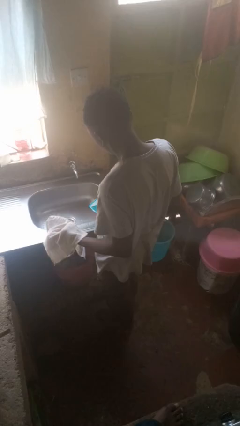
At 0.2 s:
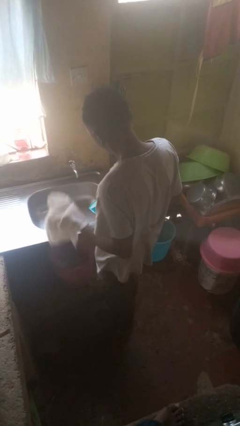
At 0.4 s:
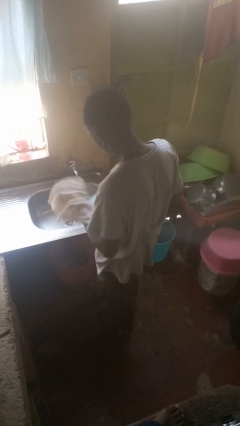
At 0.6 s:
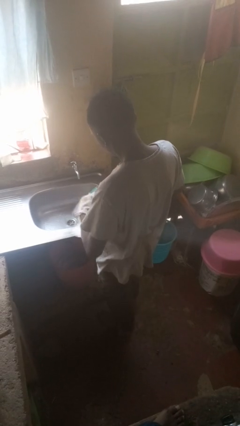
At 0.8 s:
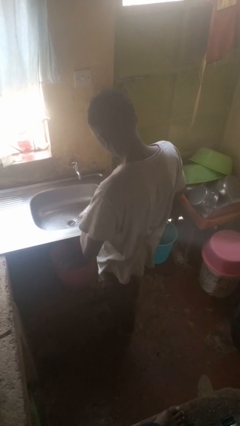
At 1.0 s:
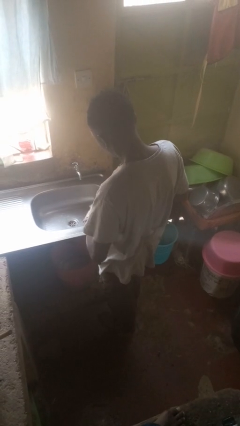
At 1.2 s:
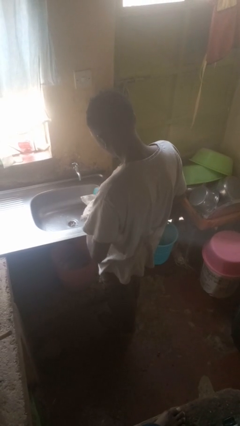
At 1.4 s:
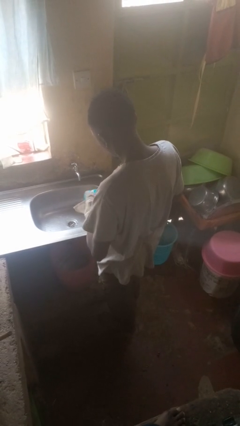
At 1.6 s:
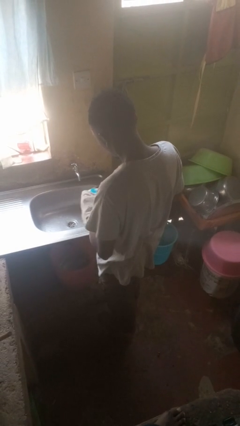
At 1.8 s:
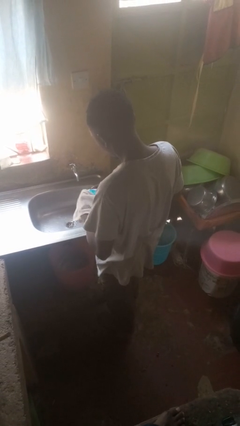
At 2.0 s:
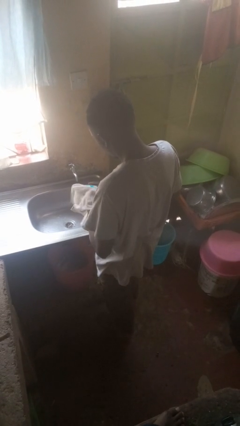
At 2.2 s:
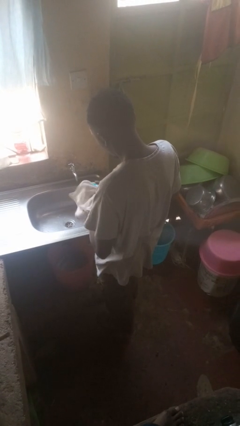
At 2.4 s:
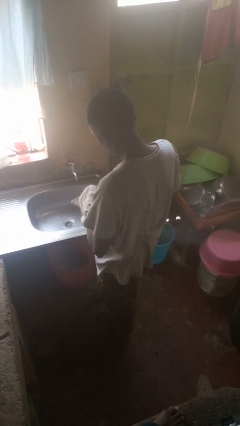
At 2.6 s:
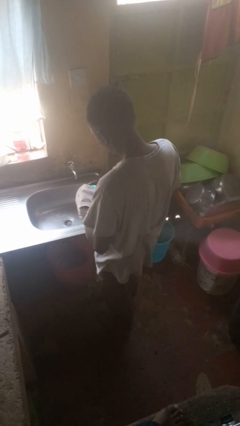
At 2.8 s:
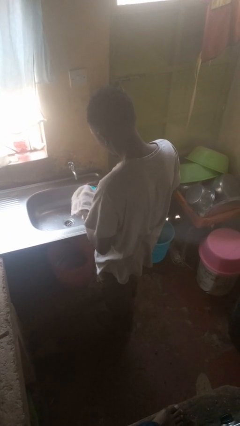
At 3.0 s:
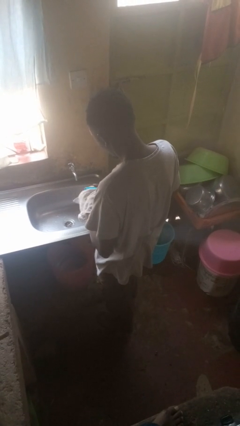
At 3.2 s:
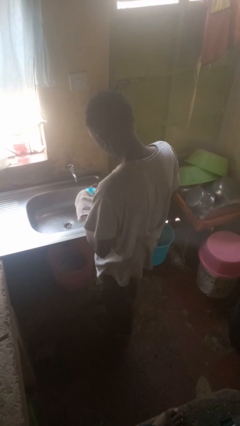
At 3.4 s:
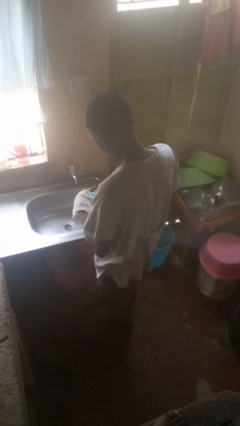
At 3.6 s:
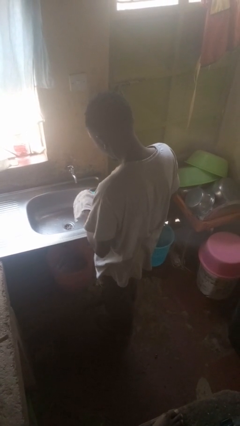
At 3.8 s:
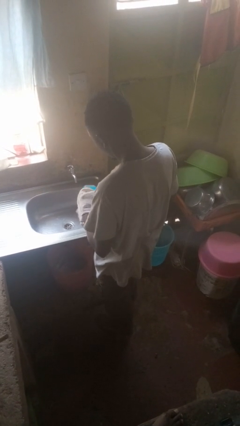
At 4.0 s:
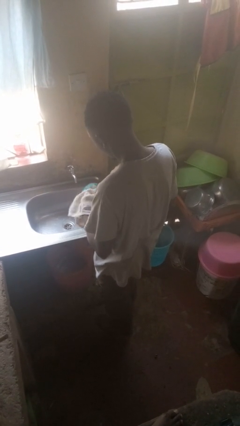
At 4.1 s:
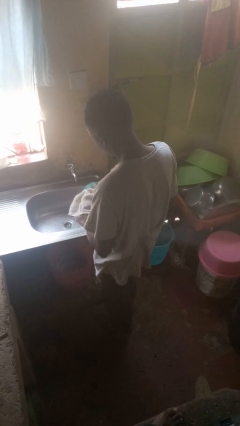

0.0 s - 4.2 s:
person dries dish

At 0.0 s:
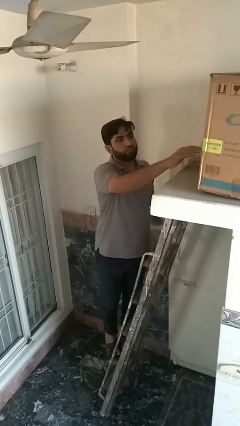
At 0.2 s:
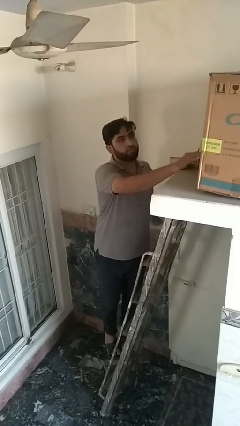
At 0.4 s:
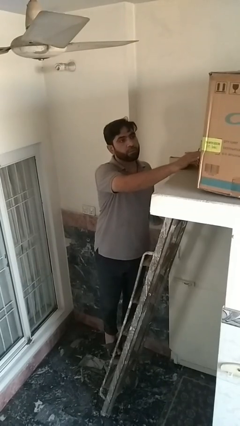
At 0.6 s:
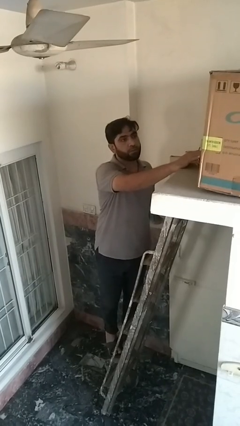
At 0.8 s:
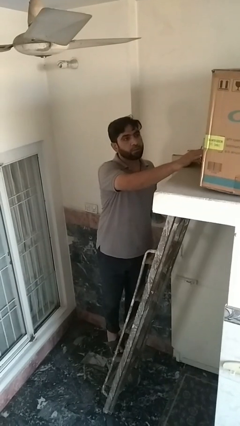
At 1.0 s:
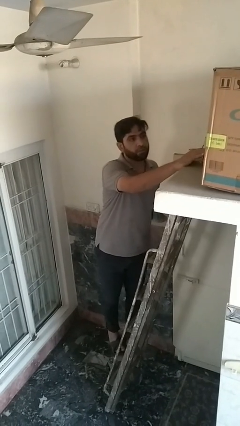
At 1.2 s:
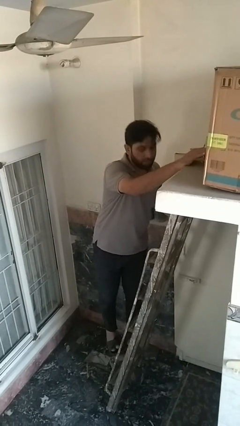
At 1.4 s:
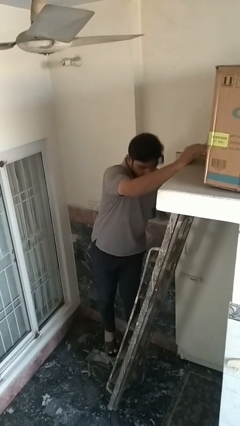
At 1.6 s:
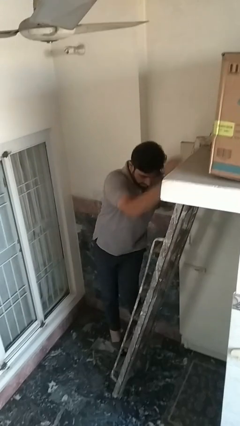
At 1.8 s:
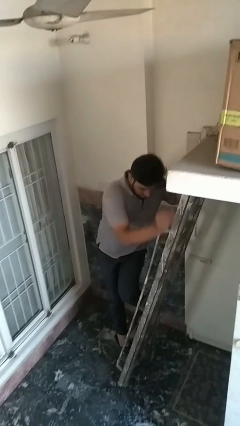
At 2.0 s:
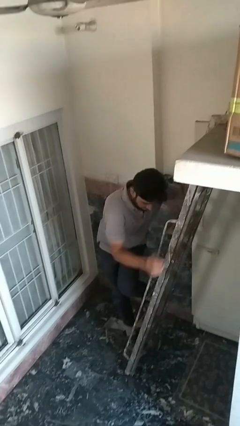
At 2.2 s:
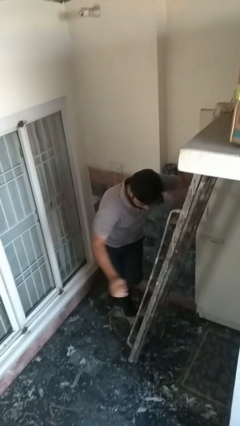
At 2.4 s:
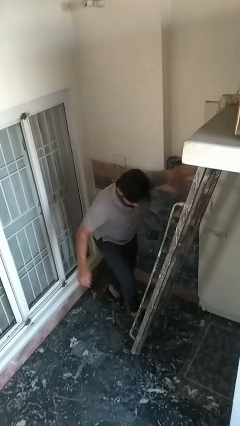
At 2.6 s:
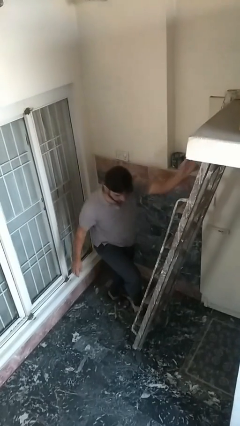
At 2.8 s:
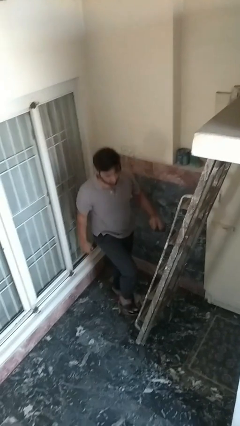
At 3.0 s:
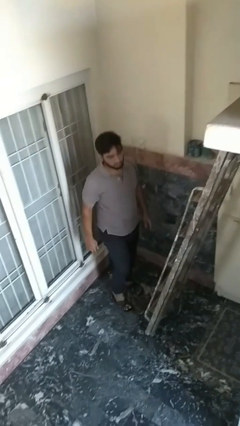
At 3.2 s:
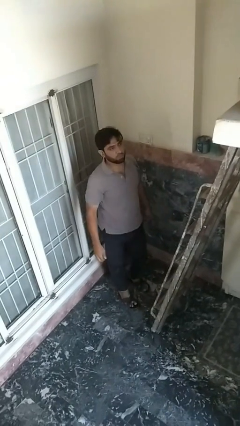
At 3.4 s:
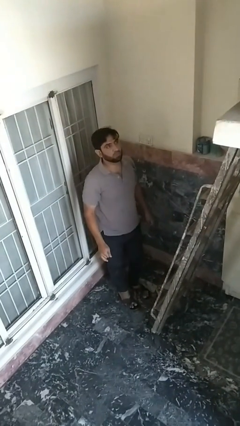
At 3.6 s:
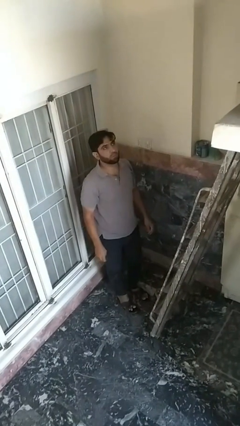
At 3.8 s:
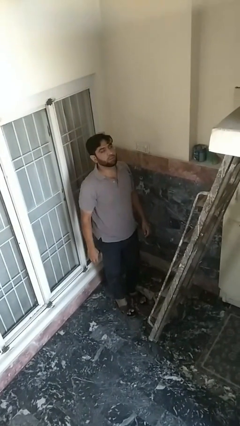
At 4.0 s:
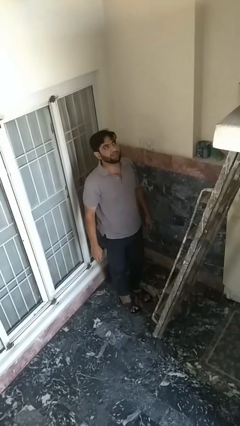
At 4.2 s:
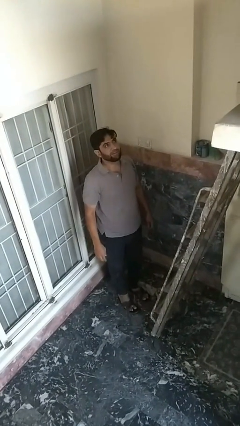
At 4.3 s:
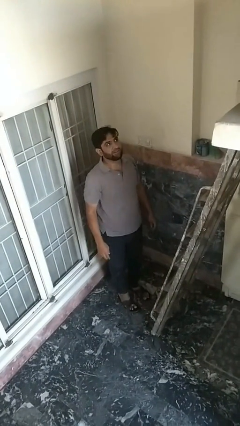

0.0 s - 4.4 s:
person climbs down ladder

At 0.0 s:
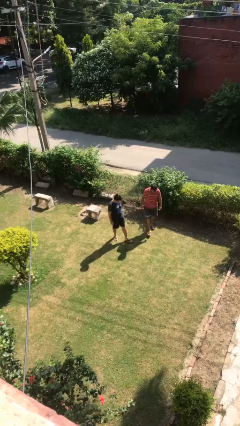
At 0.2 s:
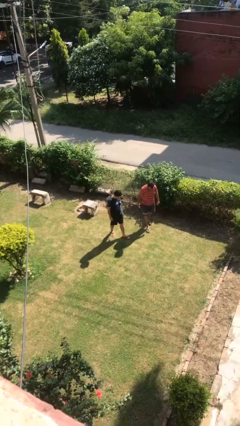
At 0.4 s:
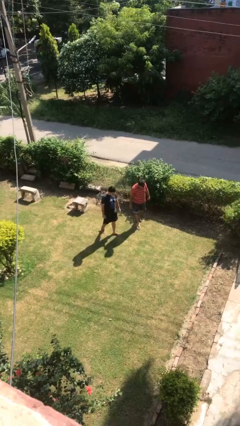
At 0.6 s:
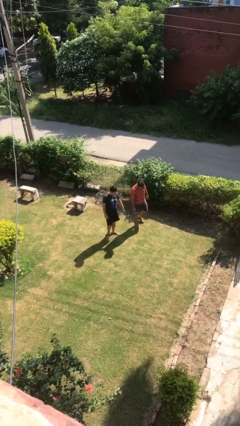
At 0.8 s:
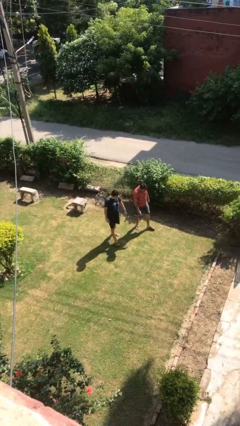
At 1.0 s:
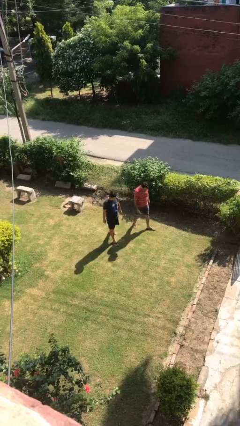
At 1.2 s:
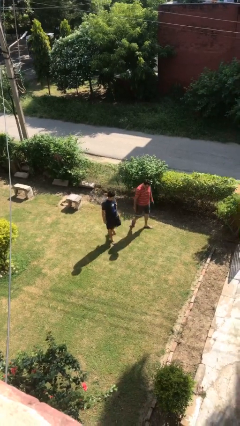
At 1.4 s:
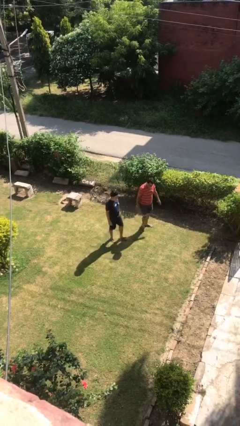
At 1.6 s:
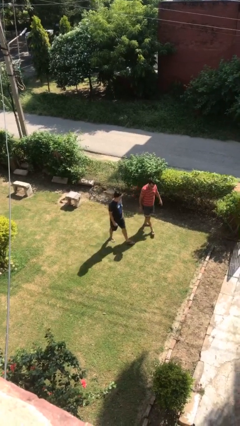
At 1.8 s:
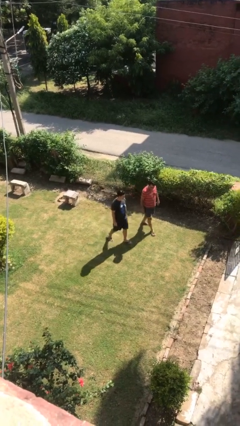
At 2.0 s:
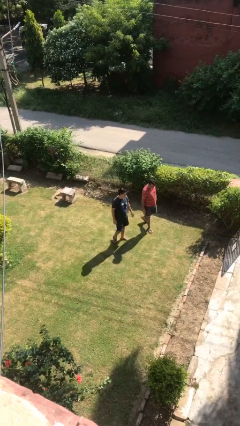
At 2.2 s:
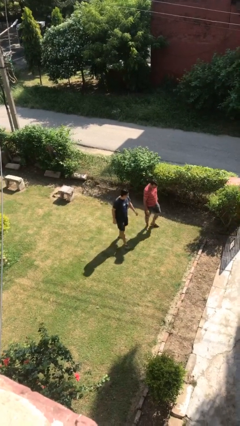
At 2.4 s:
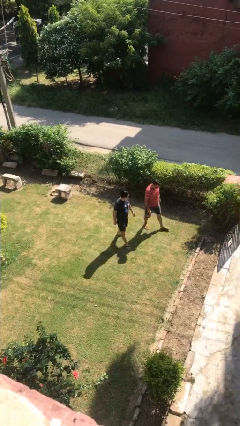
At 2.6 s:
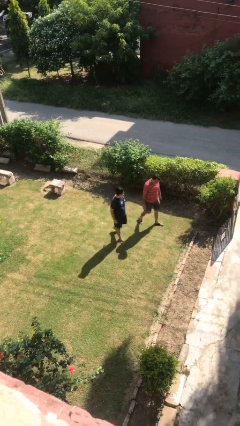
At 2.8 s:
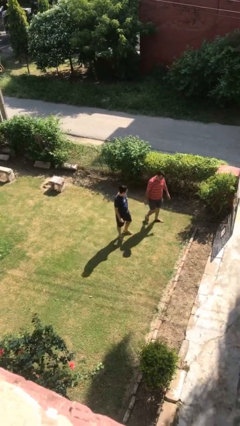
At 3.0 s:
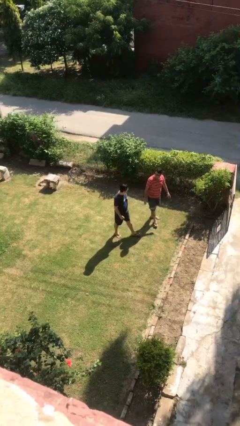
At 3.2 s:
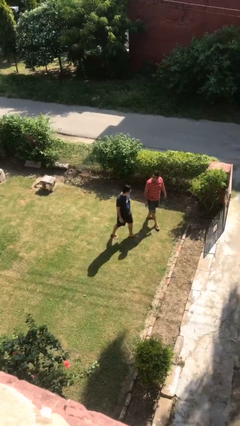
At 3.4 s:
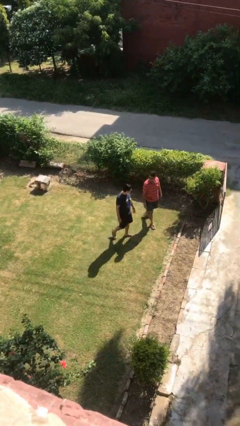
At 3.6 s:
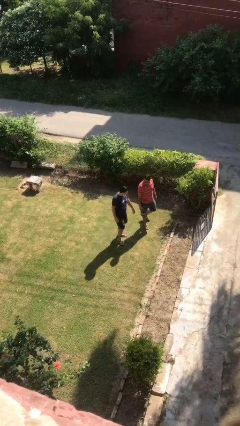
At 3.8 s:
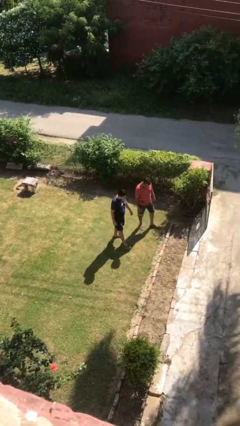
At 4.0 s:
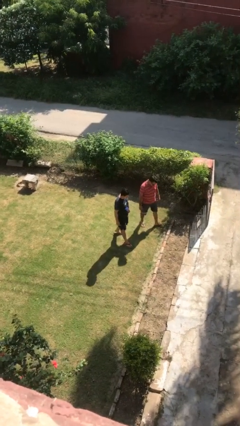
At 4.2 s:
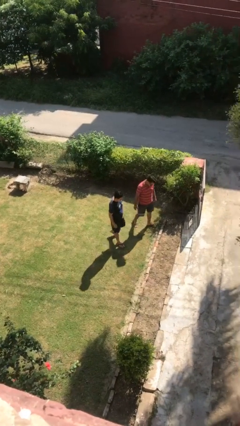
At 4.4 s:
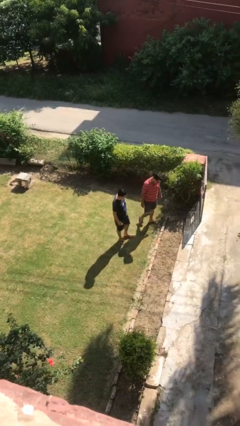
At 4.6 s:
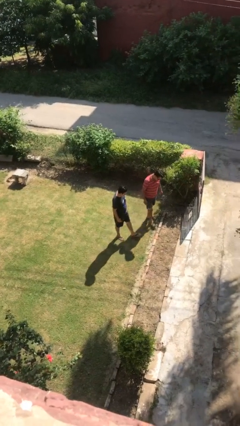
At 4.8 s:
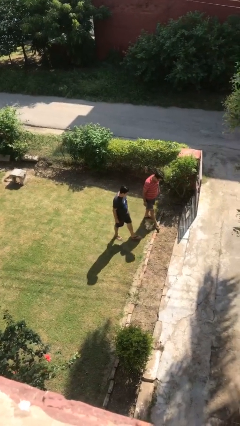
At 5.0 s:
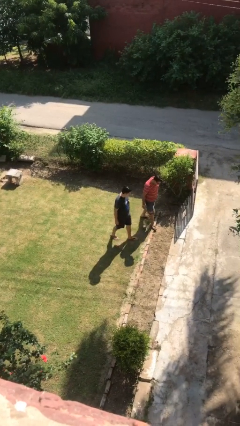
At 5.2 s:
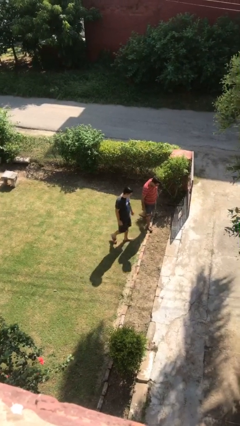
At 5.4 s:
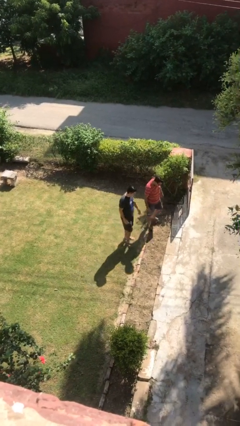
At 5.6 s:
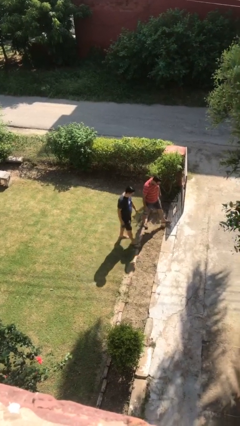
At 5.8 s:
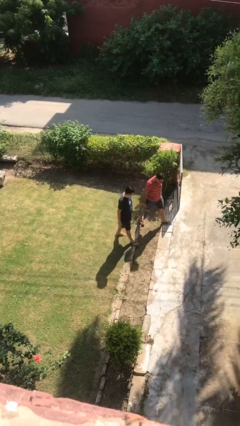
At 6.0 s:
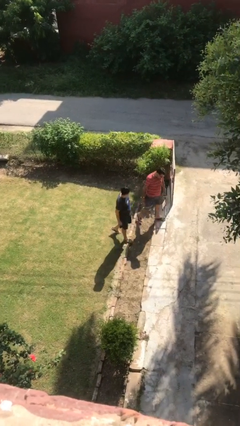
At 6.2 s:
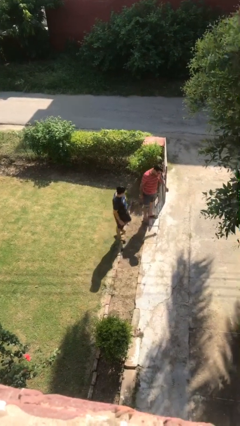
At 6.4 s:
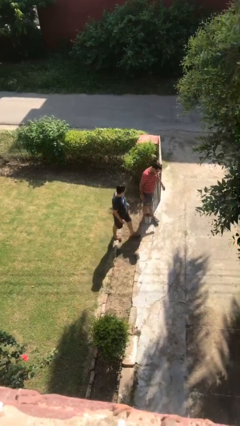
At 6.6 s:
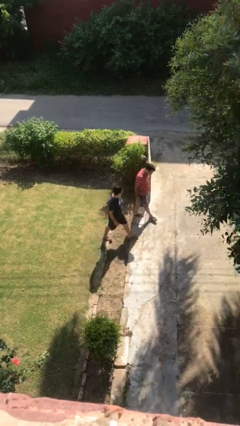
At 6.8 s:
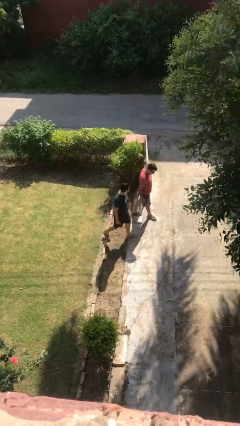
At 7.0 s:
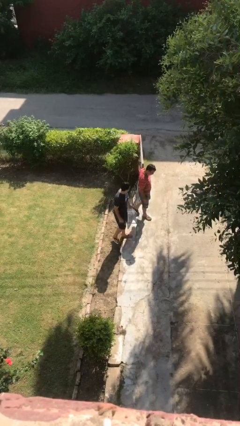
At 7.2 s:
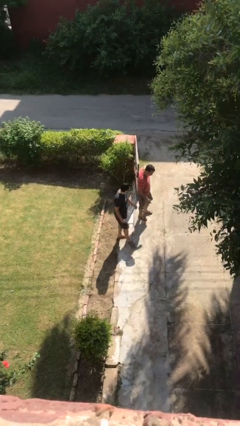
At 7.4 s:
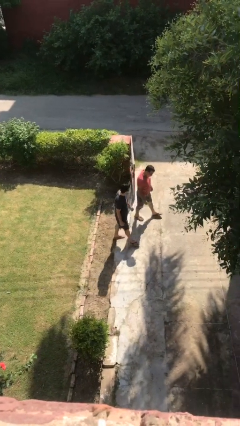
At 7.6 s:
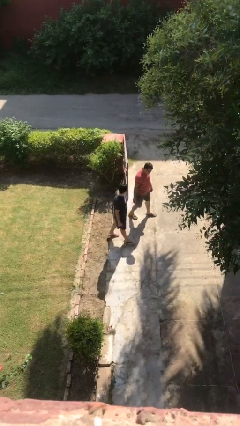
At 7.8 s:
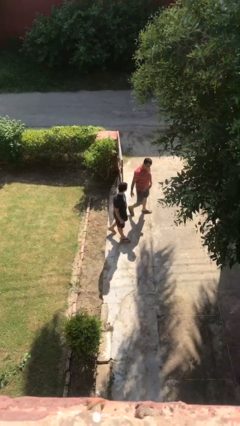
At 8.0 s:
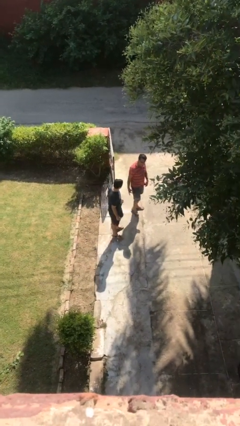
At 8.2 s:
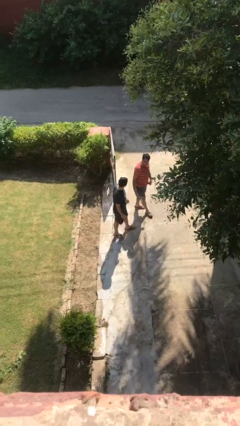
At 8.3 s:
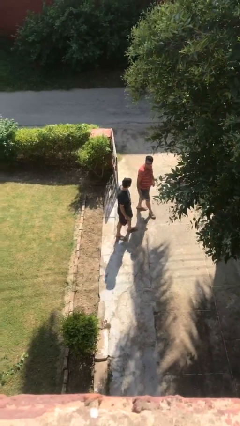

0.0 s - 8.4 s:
person talks to person

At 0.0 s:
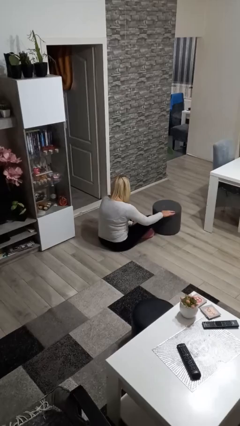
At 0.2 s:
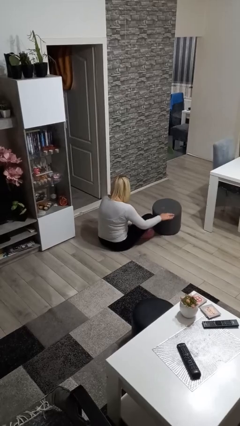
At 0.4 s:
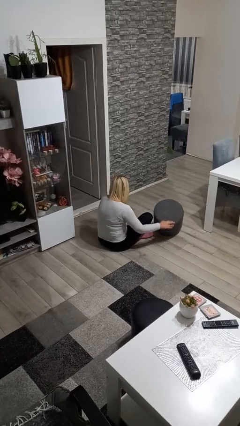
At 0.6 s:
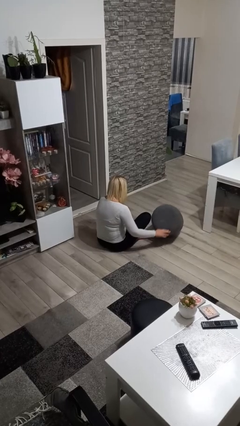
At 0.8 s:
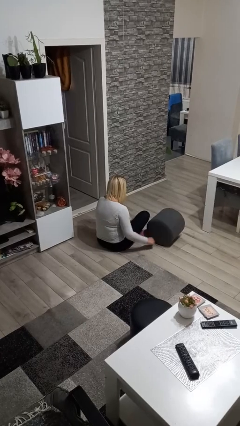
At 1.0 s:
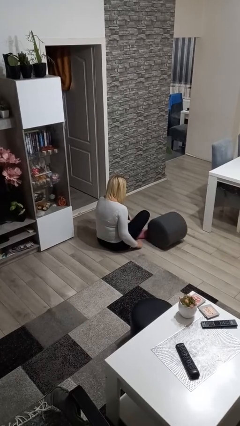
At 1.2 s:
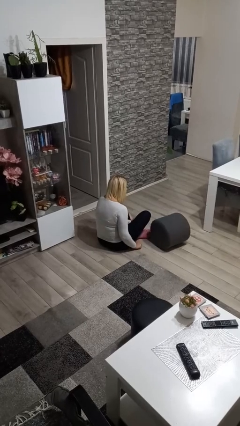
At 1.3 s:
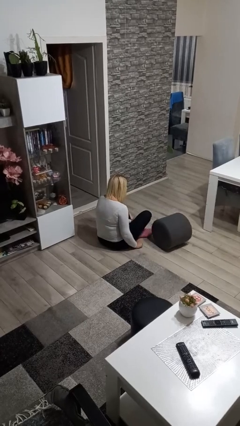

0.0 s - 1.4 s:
person knocks over furniture
